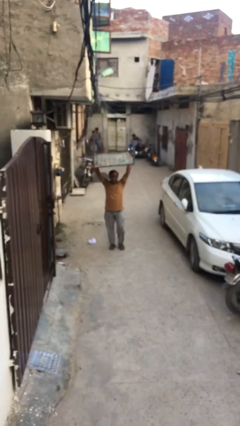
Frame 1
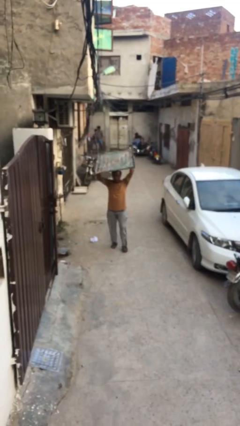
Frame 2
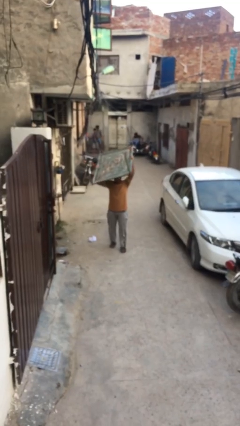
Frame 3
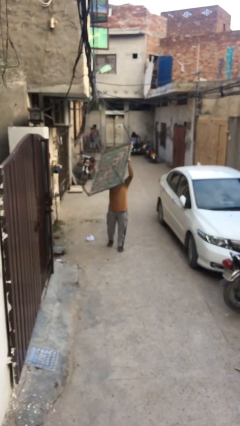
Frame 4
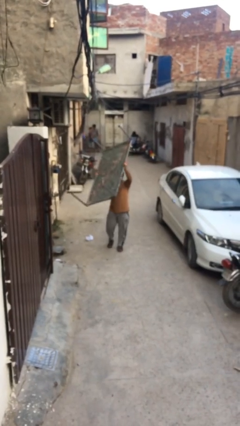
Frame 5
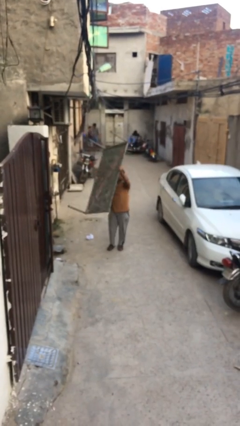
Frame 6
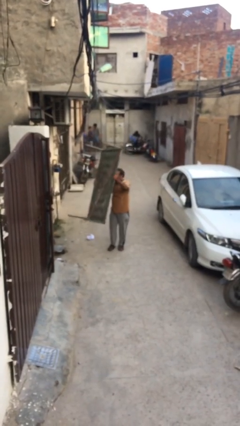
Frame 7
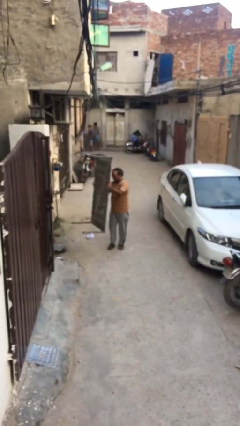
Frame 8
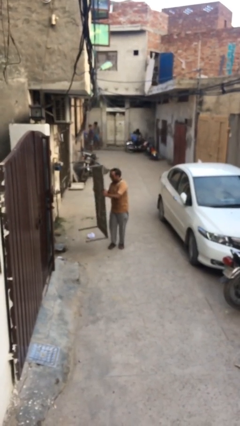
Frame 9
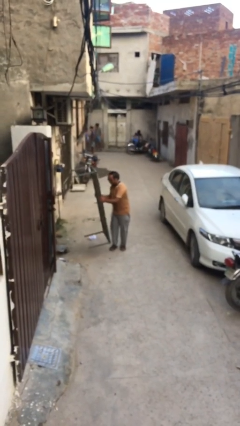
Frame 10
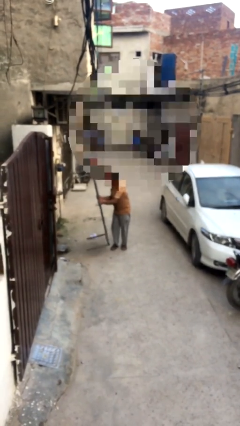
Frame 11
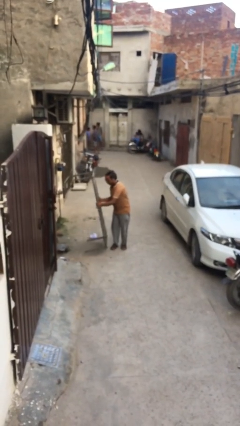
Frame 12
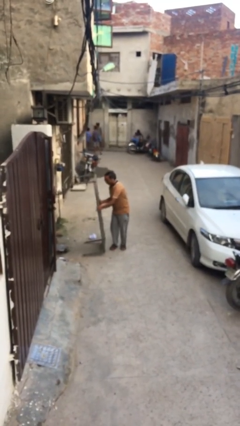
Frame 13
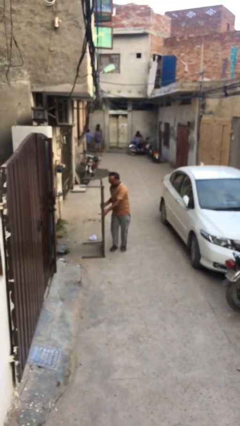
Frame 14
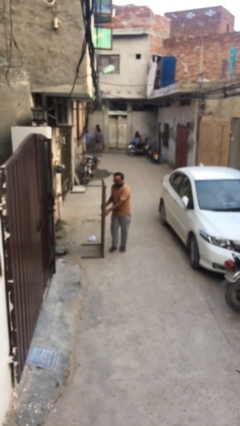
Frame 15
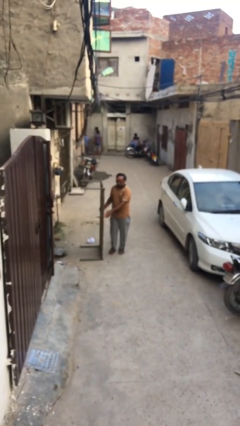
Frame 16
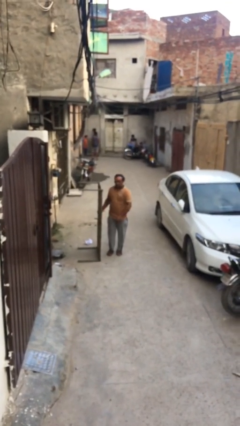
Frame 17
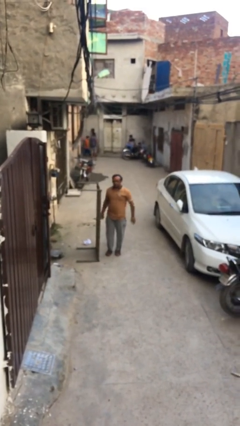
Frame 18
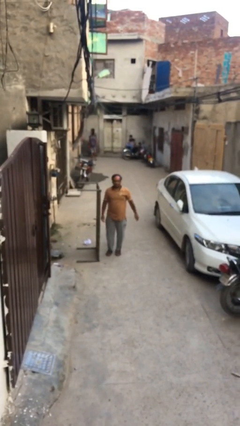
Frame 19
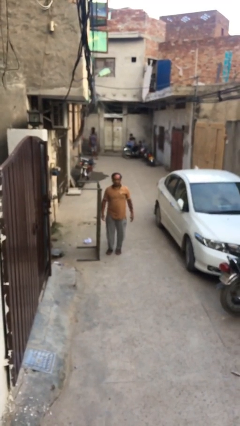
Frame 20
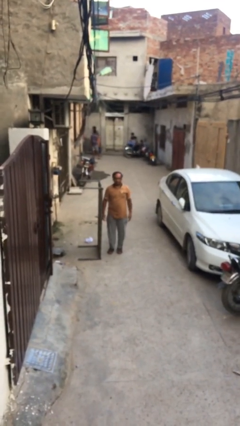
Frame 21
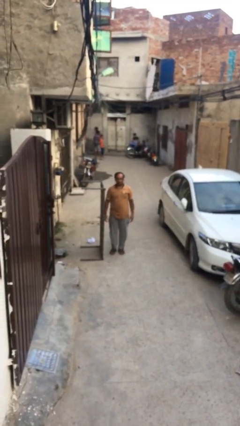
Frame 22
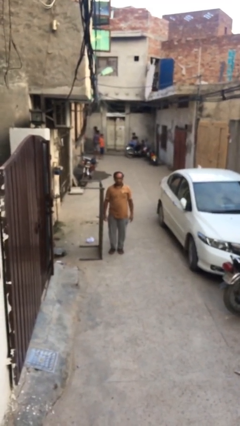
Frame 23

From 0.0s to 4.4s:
person puts down object on floor

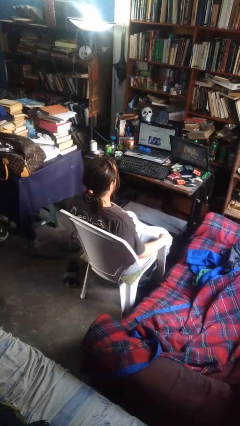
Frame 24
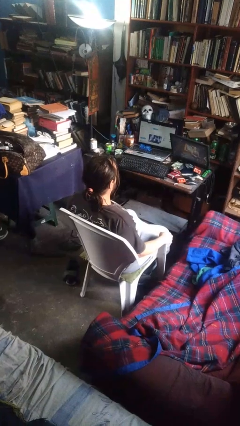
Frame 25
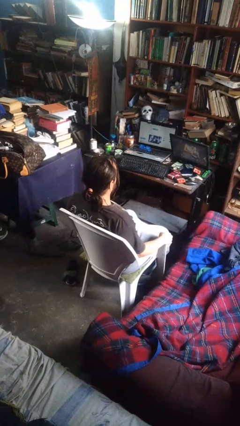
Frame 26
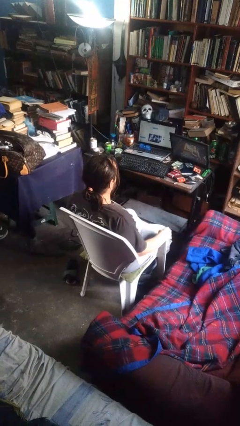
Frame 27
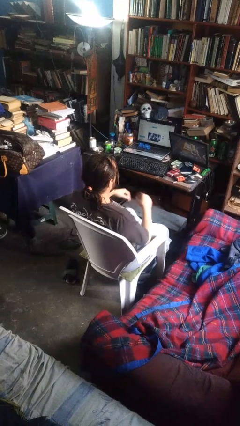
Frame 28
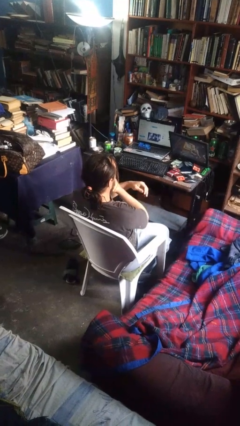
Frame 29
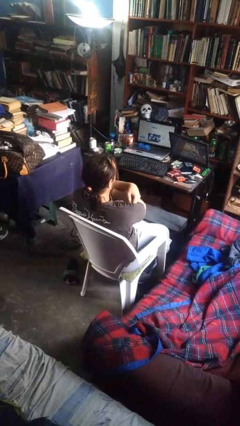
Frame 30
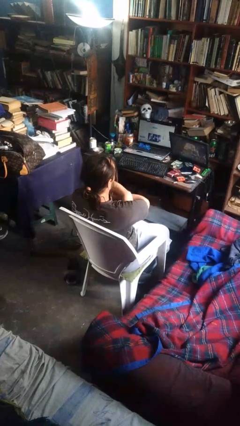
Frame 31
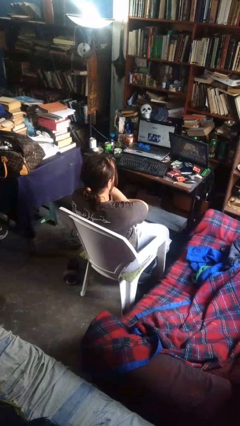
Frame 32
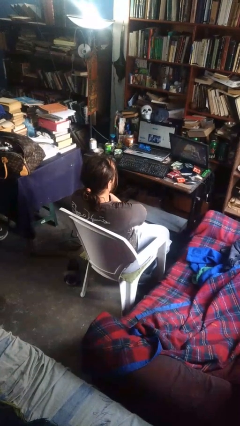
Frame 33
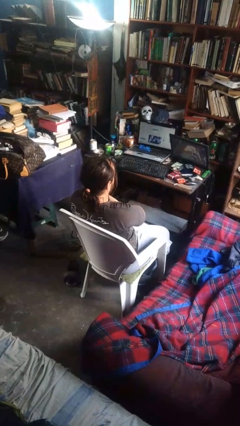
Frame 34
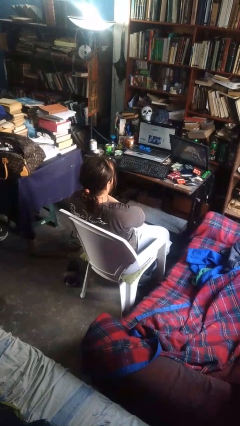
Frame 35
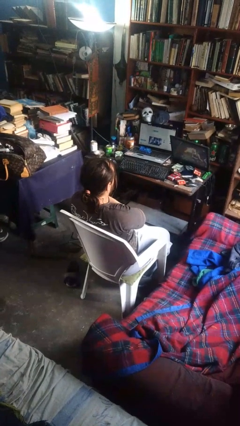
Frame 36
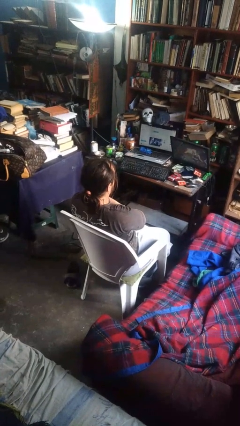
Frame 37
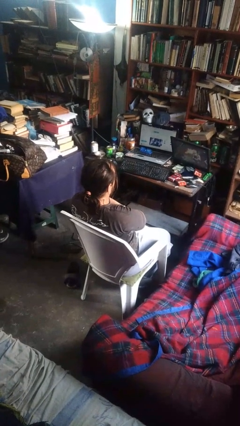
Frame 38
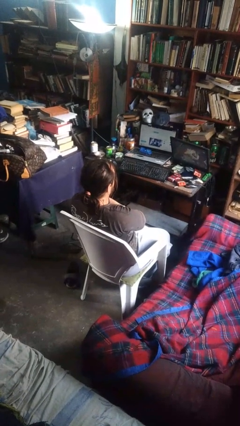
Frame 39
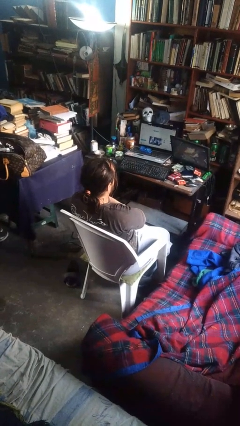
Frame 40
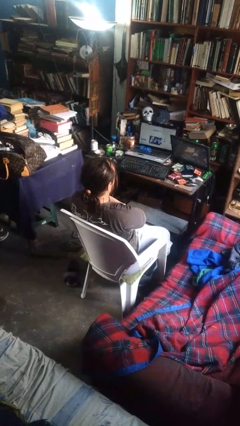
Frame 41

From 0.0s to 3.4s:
person crosses arms

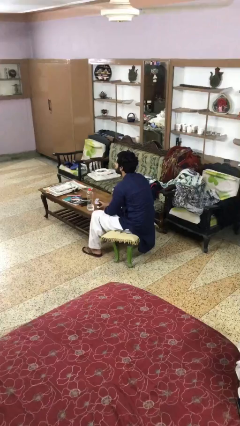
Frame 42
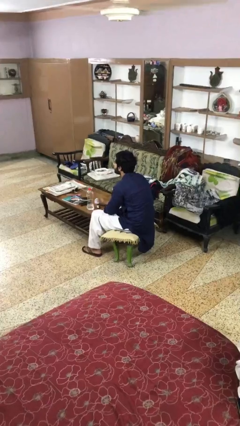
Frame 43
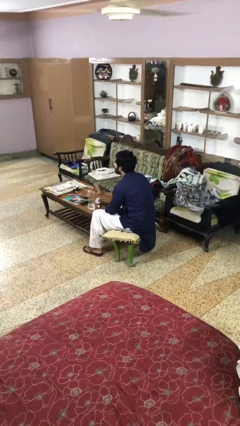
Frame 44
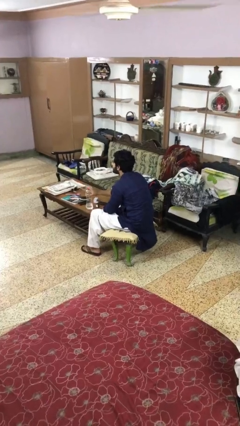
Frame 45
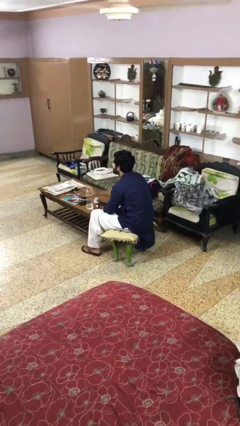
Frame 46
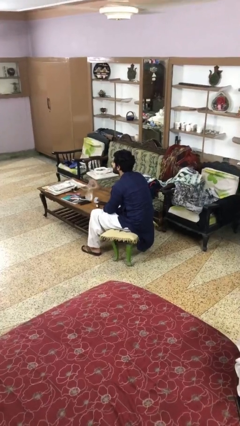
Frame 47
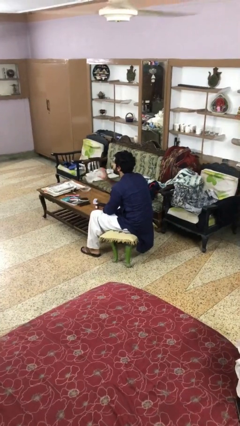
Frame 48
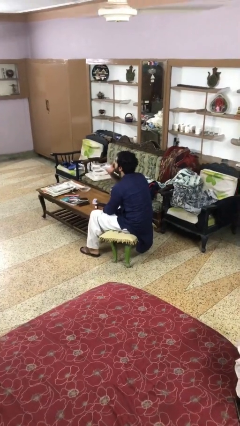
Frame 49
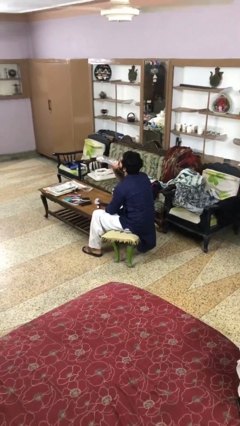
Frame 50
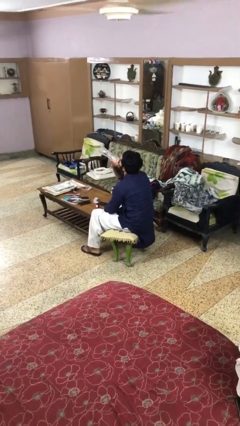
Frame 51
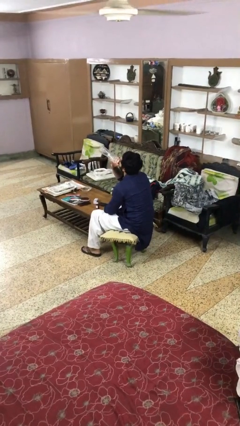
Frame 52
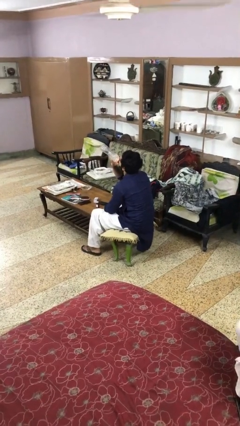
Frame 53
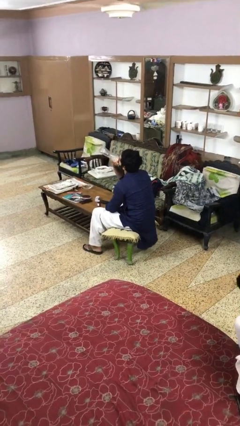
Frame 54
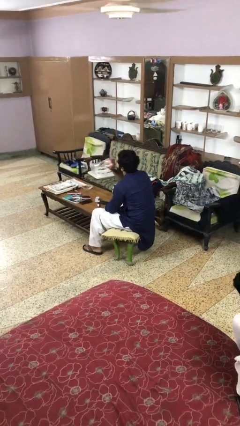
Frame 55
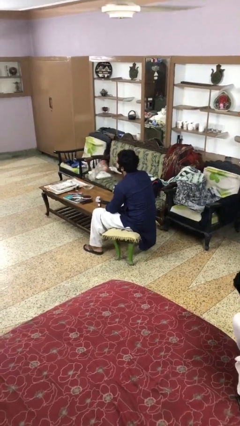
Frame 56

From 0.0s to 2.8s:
person drinks from cup

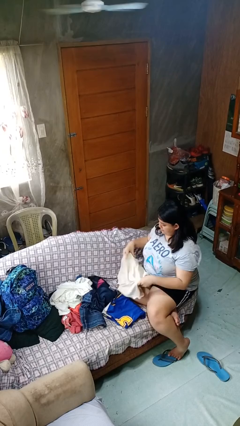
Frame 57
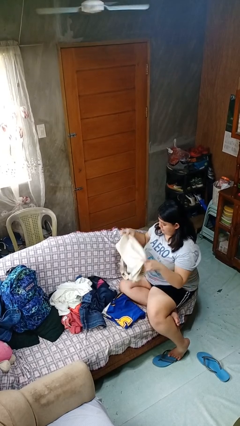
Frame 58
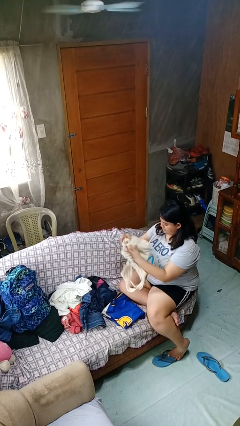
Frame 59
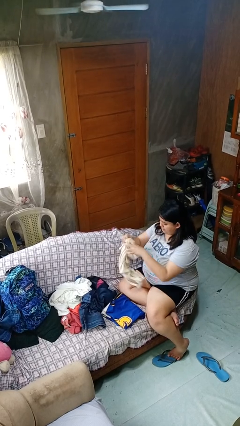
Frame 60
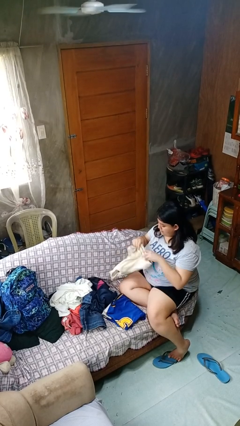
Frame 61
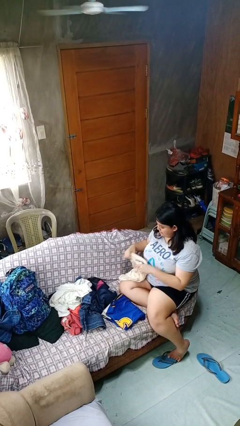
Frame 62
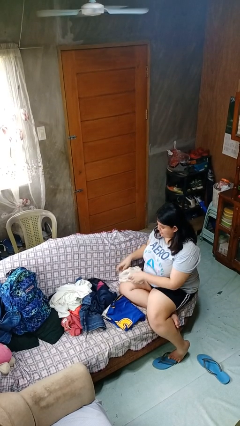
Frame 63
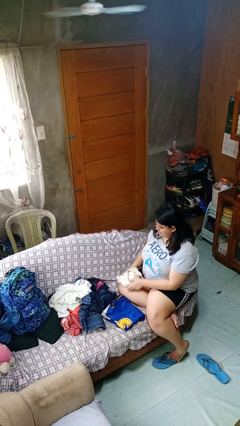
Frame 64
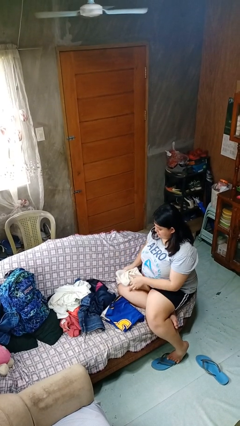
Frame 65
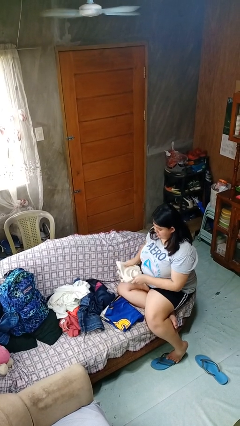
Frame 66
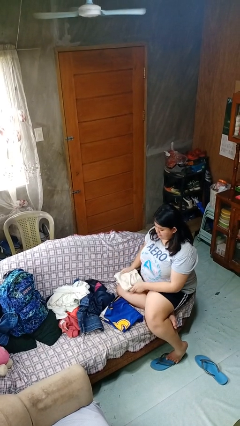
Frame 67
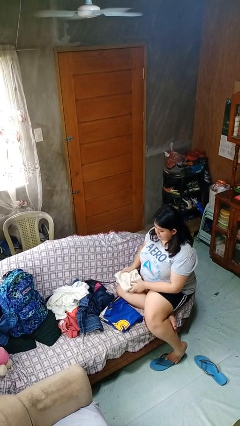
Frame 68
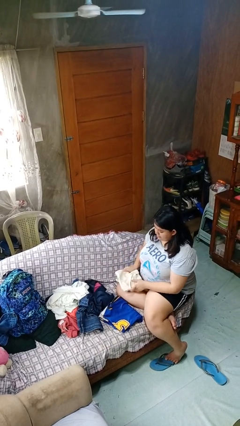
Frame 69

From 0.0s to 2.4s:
person folds shirt

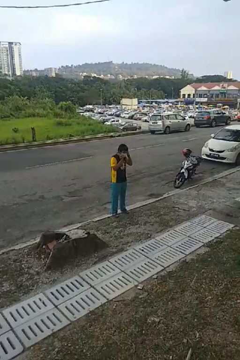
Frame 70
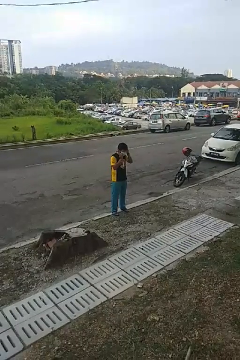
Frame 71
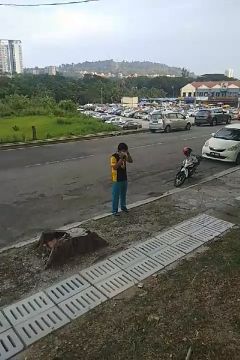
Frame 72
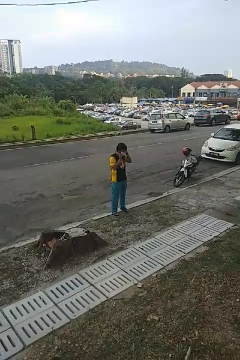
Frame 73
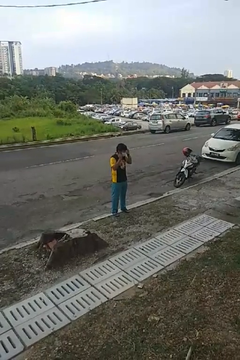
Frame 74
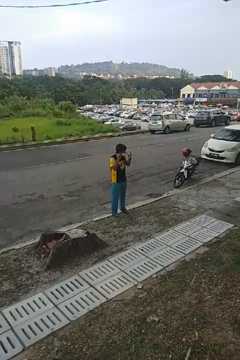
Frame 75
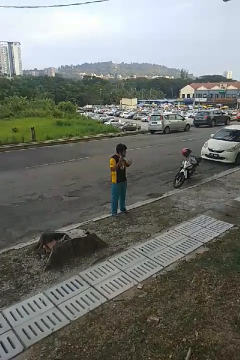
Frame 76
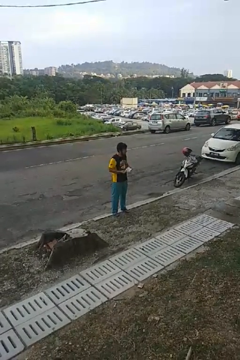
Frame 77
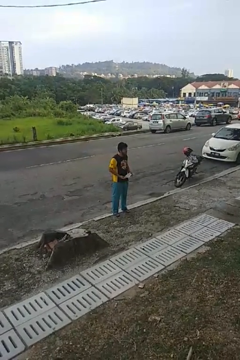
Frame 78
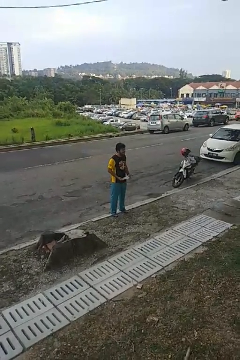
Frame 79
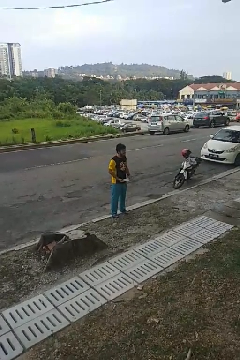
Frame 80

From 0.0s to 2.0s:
person takes off facemask

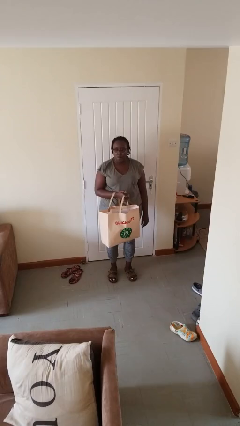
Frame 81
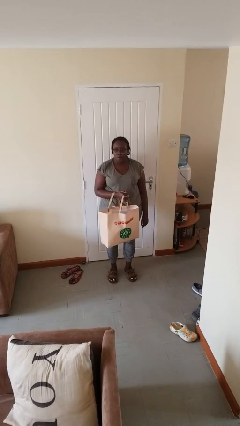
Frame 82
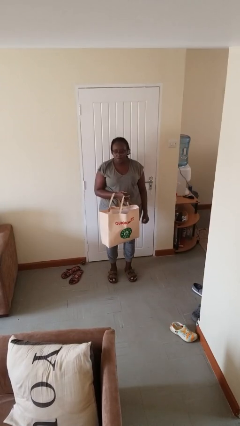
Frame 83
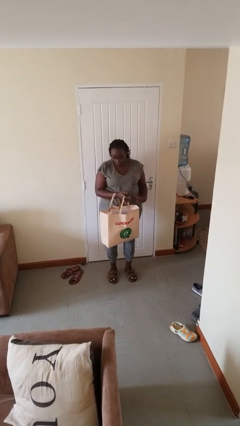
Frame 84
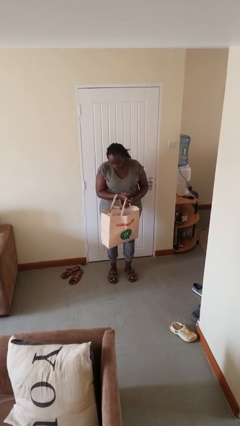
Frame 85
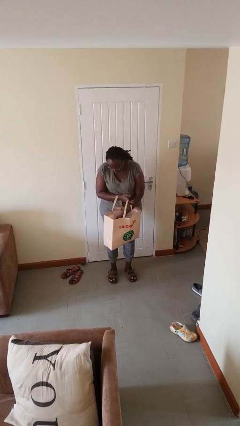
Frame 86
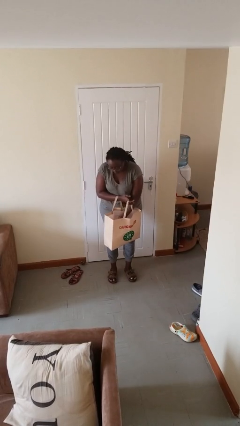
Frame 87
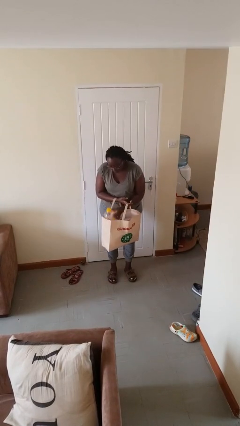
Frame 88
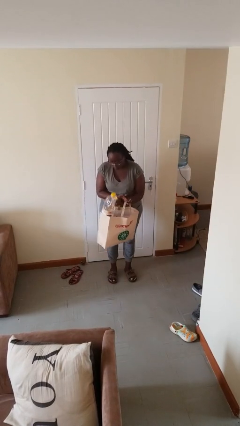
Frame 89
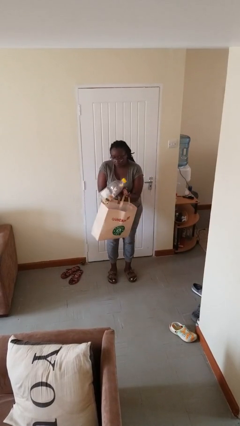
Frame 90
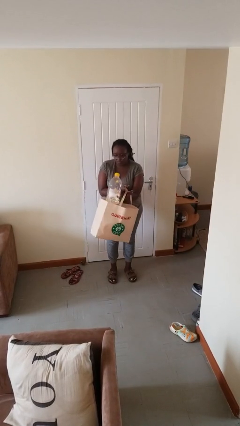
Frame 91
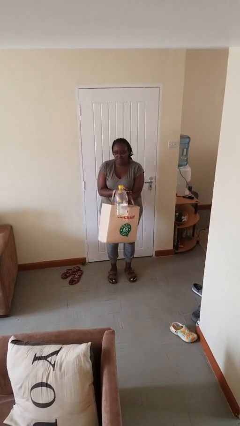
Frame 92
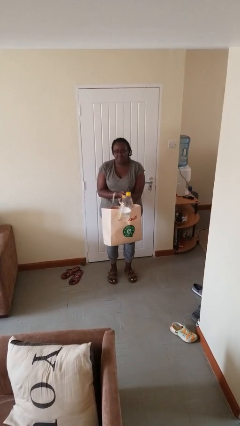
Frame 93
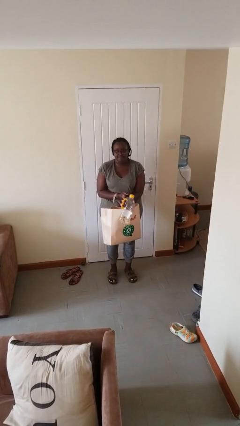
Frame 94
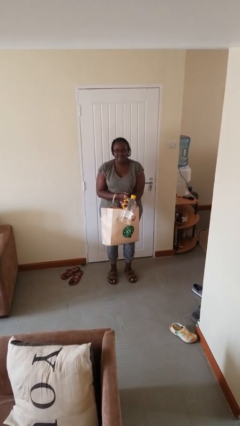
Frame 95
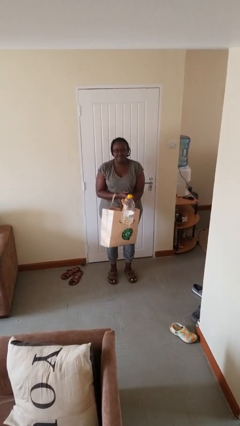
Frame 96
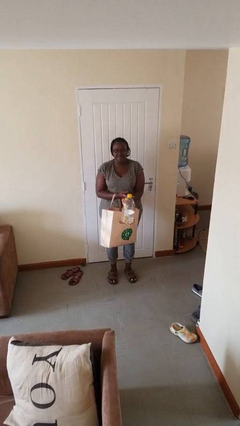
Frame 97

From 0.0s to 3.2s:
person takes object from bag
